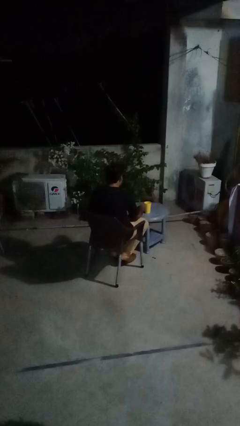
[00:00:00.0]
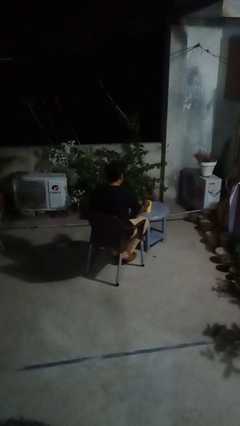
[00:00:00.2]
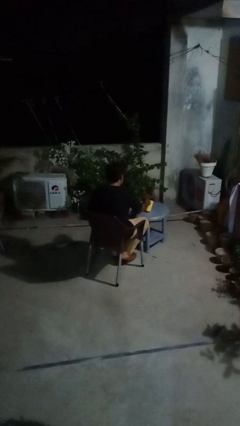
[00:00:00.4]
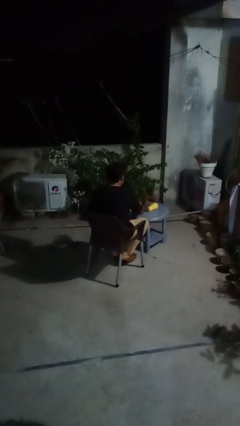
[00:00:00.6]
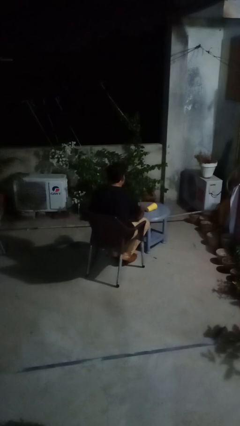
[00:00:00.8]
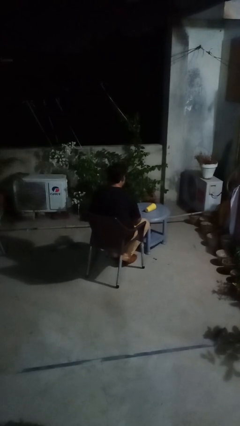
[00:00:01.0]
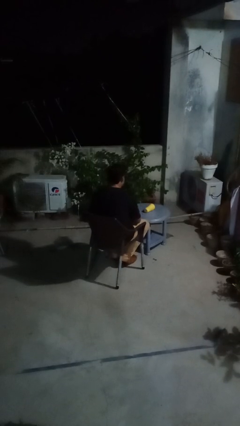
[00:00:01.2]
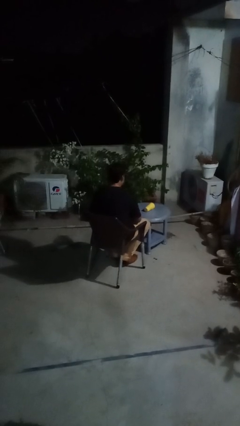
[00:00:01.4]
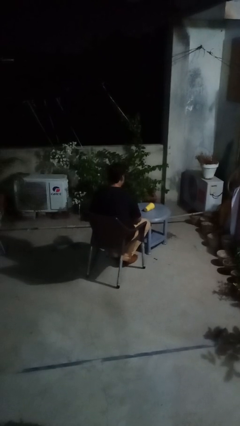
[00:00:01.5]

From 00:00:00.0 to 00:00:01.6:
person spills on table

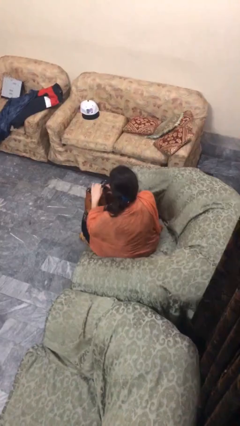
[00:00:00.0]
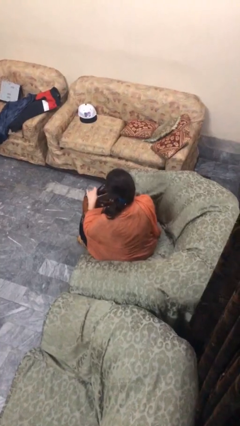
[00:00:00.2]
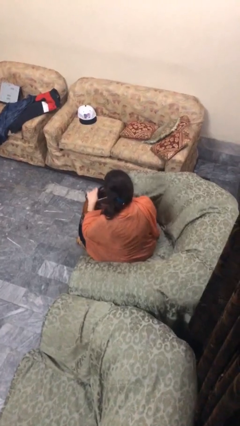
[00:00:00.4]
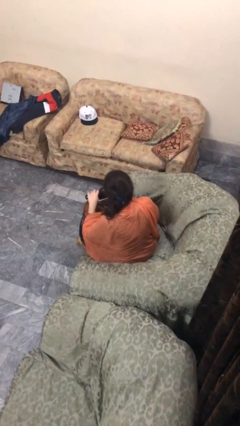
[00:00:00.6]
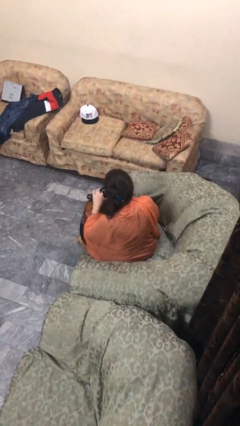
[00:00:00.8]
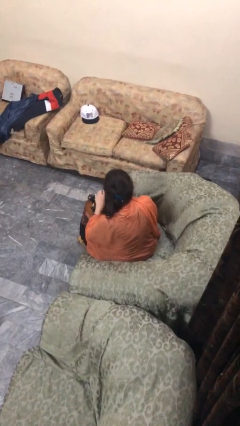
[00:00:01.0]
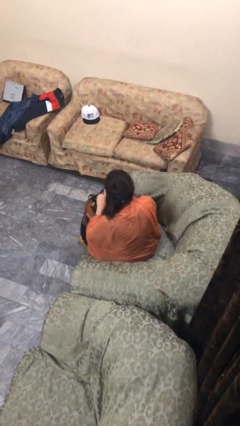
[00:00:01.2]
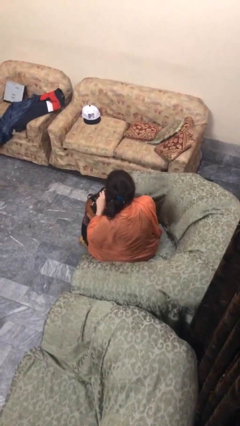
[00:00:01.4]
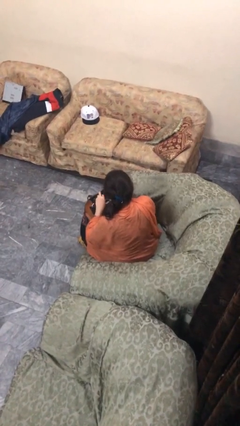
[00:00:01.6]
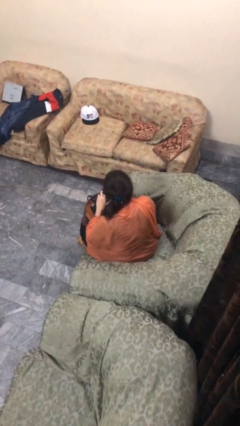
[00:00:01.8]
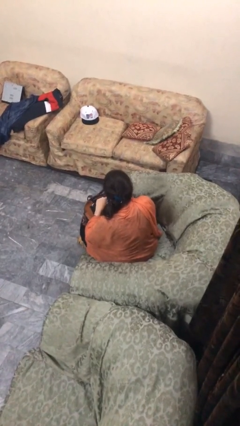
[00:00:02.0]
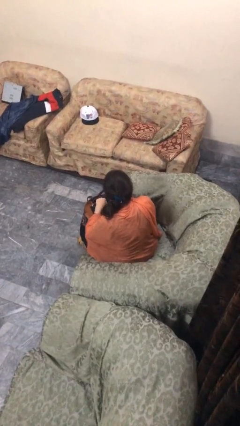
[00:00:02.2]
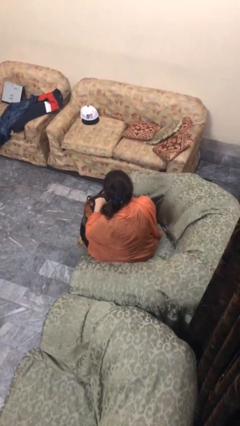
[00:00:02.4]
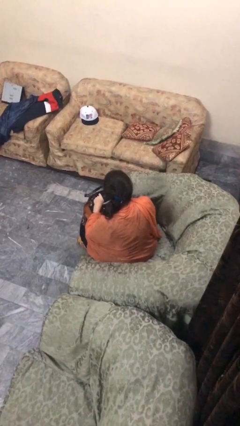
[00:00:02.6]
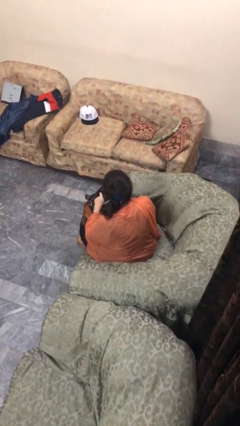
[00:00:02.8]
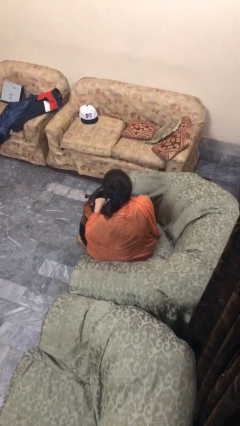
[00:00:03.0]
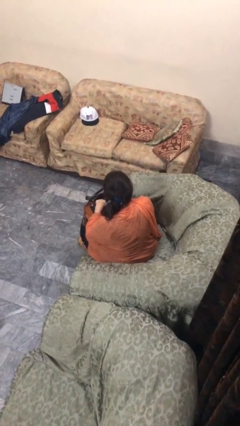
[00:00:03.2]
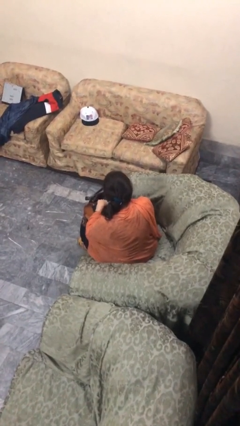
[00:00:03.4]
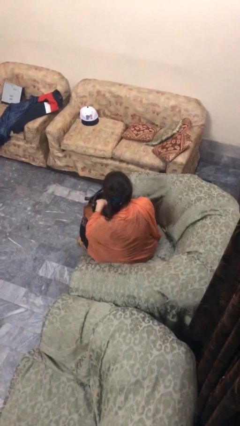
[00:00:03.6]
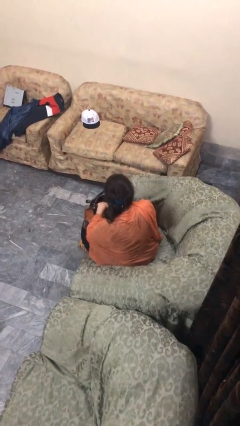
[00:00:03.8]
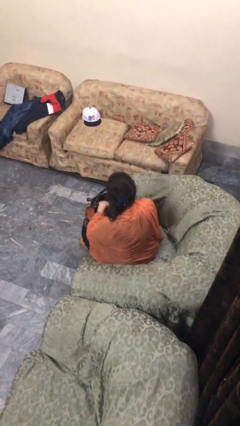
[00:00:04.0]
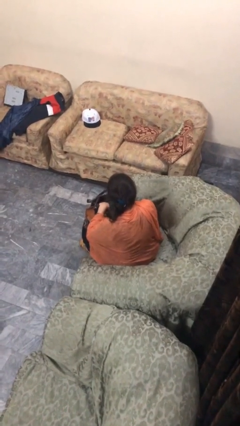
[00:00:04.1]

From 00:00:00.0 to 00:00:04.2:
person searches in purse

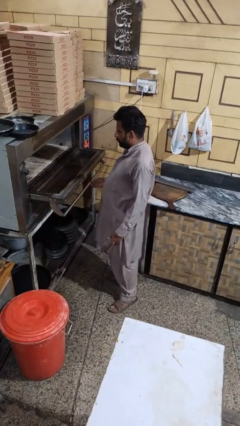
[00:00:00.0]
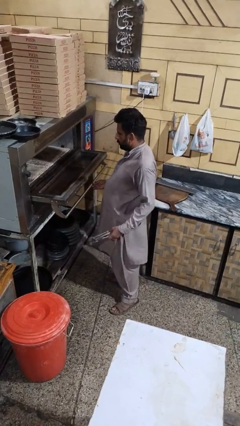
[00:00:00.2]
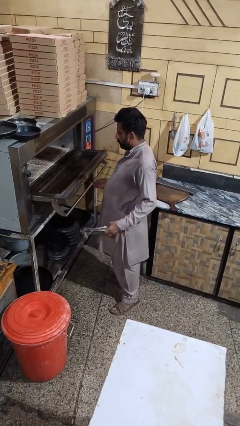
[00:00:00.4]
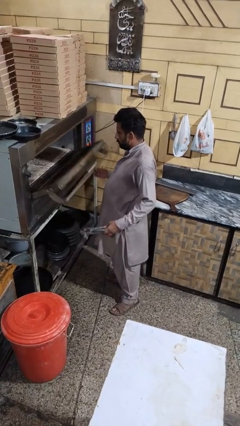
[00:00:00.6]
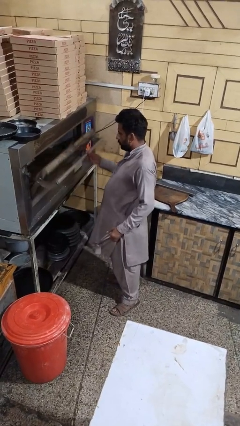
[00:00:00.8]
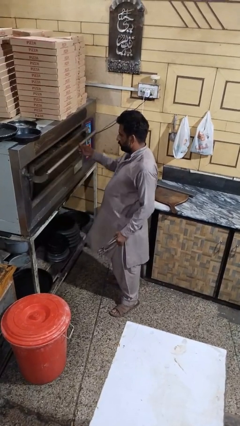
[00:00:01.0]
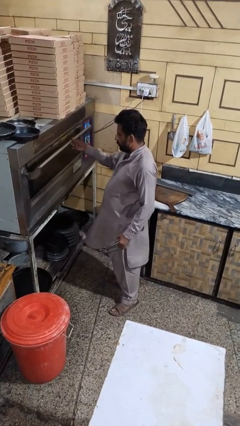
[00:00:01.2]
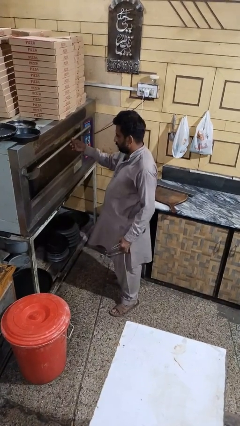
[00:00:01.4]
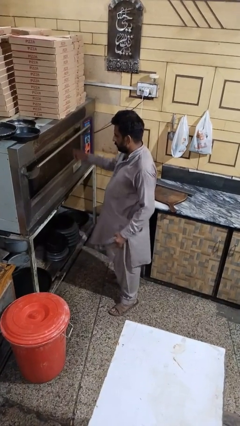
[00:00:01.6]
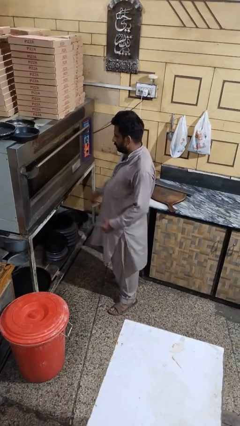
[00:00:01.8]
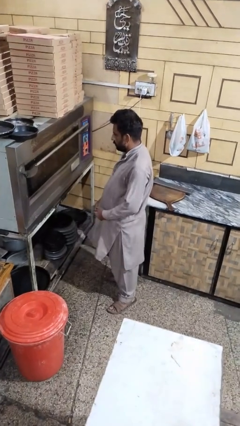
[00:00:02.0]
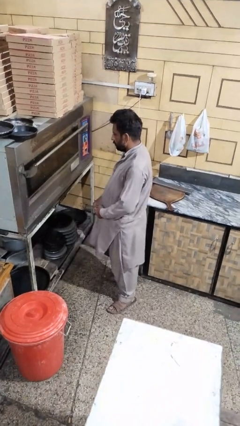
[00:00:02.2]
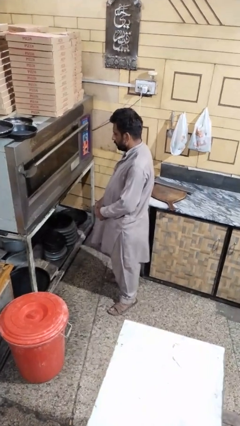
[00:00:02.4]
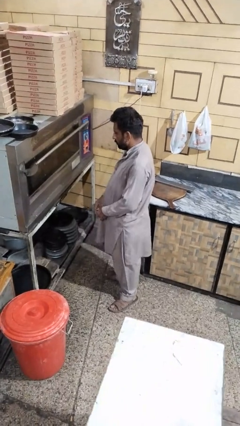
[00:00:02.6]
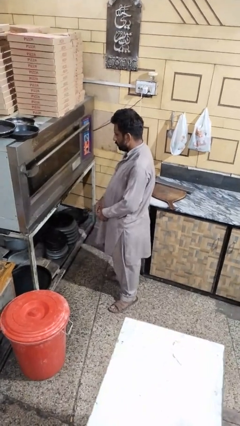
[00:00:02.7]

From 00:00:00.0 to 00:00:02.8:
person closes microwave

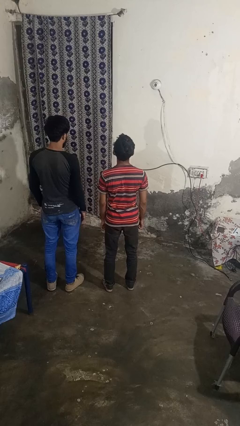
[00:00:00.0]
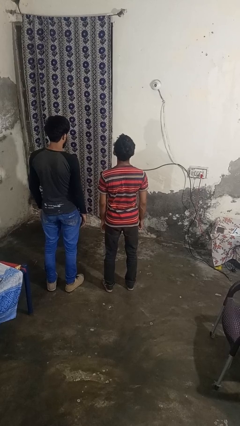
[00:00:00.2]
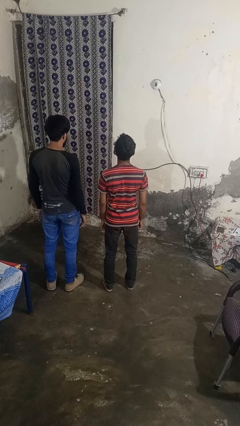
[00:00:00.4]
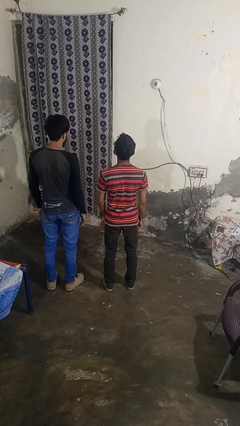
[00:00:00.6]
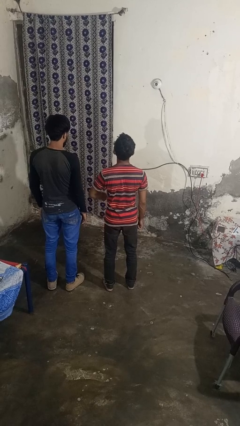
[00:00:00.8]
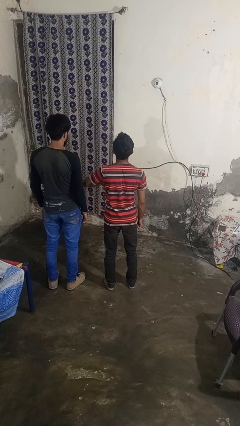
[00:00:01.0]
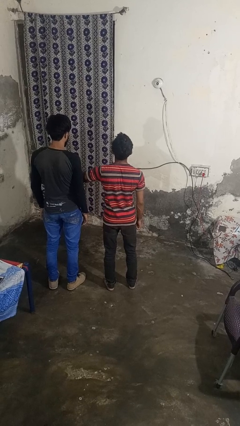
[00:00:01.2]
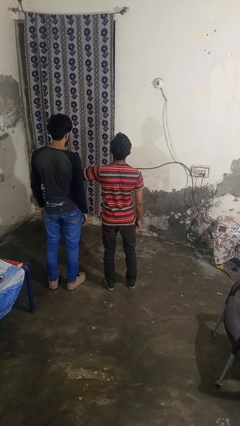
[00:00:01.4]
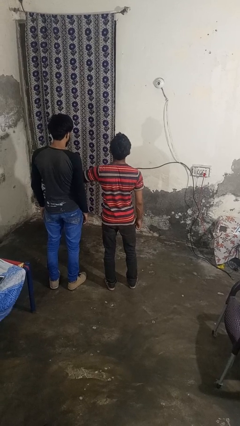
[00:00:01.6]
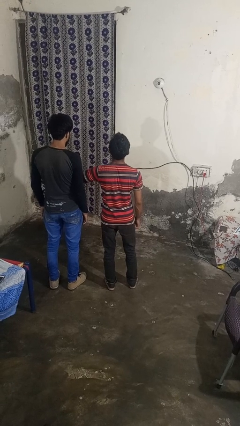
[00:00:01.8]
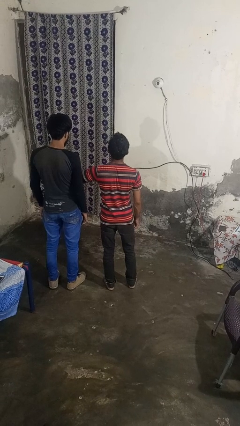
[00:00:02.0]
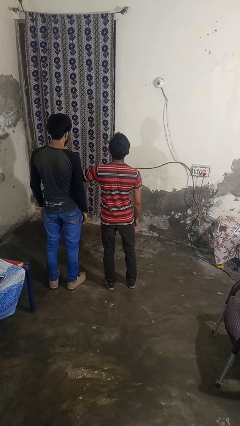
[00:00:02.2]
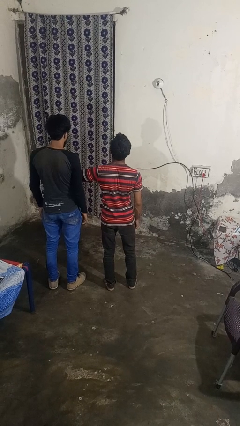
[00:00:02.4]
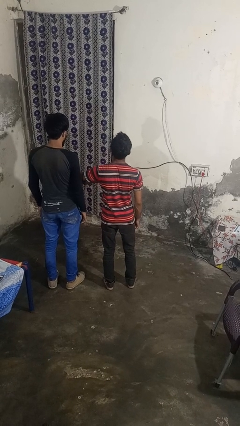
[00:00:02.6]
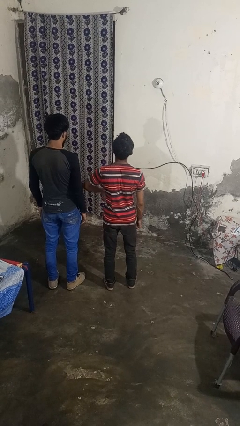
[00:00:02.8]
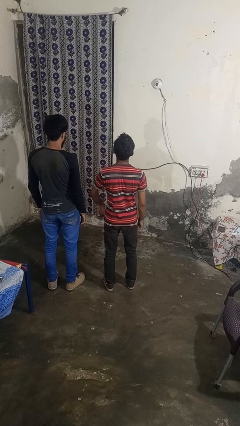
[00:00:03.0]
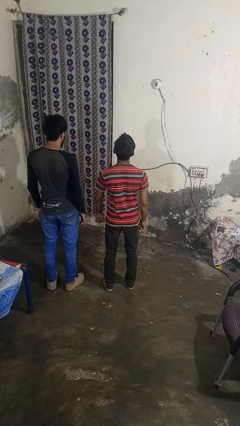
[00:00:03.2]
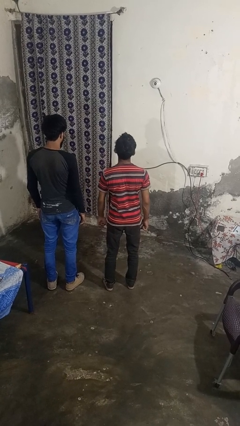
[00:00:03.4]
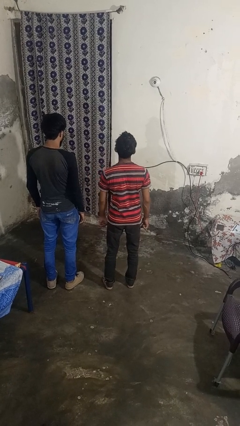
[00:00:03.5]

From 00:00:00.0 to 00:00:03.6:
person nudges person with elbow

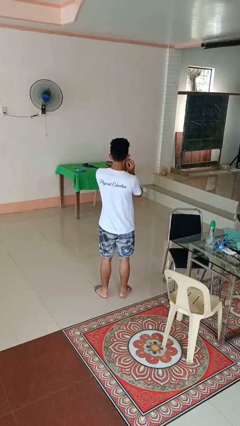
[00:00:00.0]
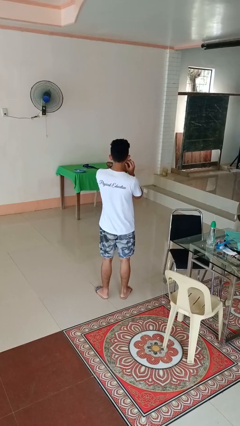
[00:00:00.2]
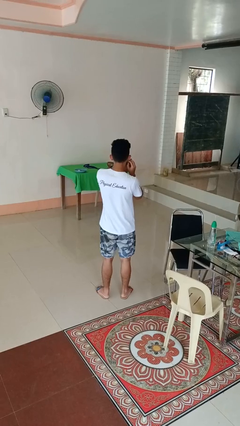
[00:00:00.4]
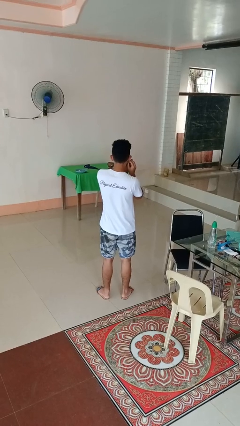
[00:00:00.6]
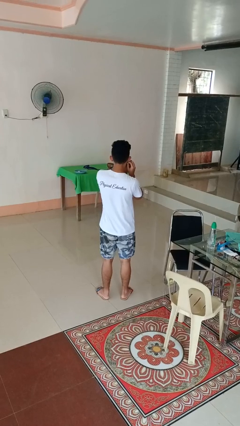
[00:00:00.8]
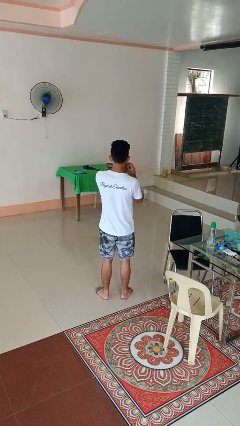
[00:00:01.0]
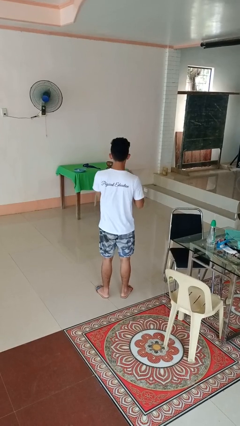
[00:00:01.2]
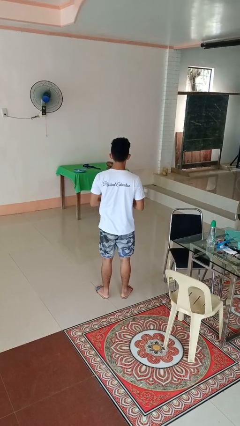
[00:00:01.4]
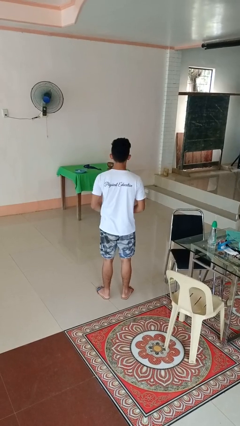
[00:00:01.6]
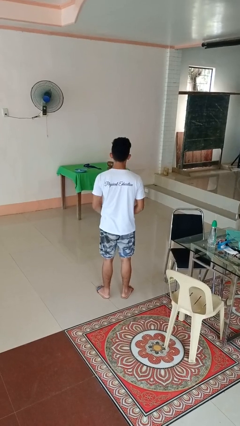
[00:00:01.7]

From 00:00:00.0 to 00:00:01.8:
person takes off earrings

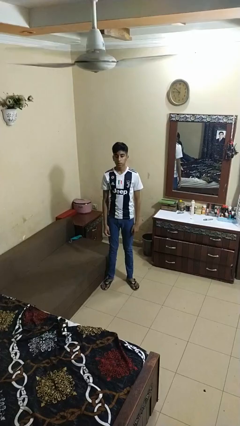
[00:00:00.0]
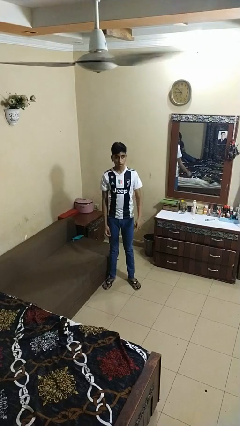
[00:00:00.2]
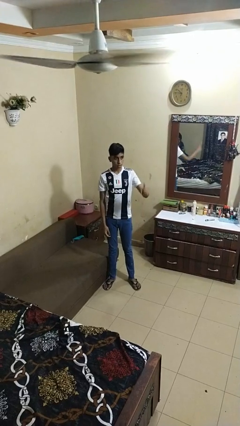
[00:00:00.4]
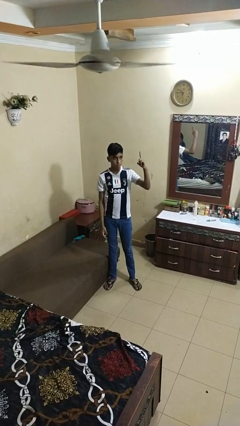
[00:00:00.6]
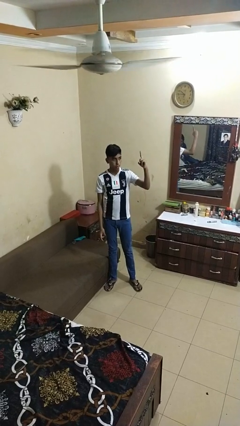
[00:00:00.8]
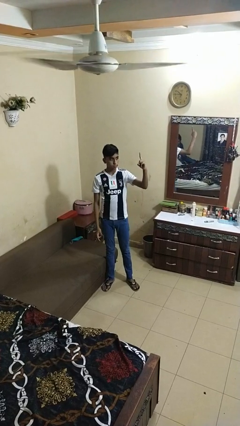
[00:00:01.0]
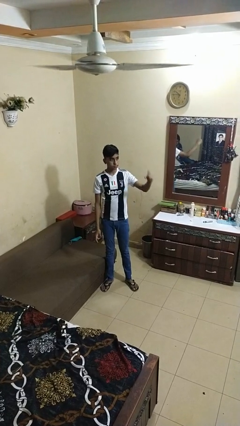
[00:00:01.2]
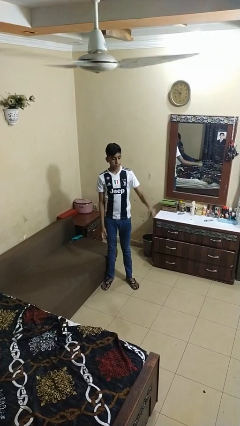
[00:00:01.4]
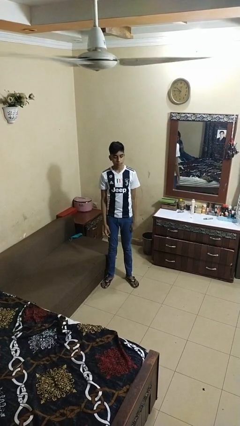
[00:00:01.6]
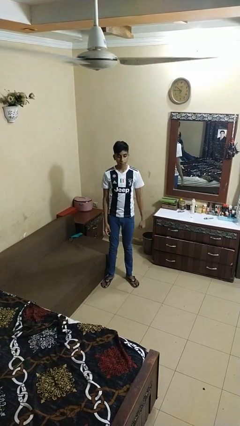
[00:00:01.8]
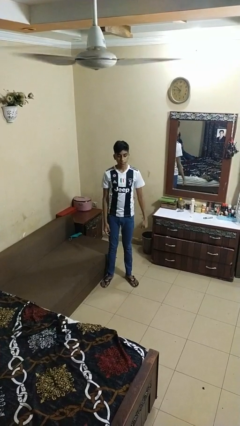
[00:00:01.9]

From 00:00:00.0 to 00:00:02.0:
person gestures number one

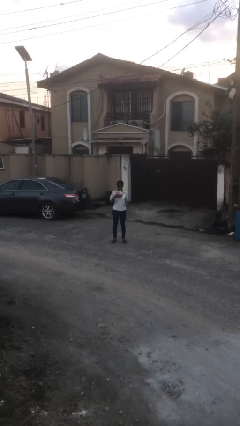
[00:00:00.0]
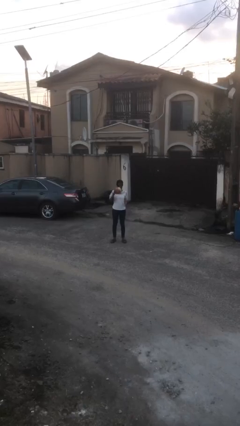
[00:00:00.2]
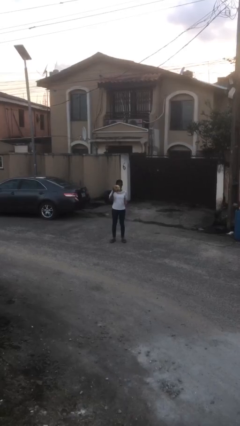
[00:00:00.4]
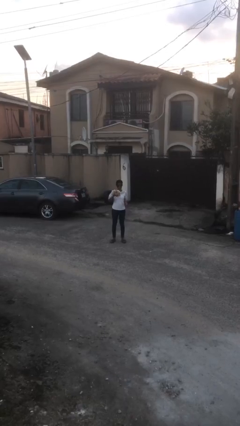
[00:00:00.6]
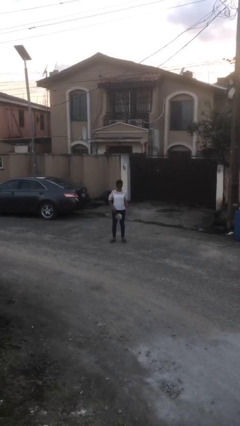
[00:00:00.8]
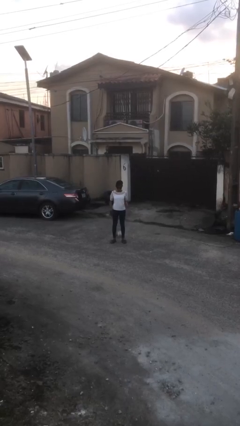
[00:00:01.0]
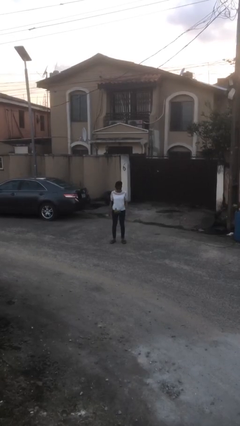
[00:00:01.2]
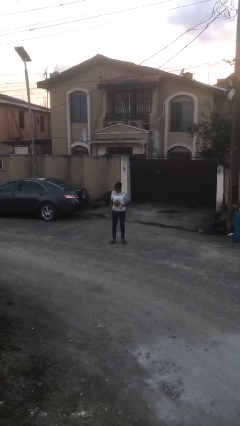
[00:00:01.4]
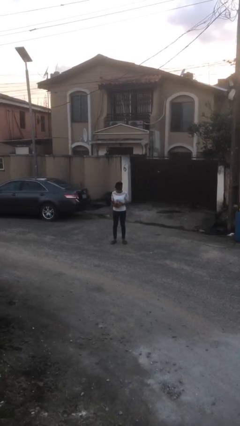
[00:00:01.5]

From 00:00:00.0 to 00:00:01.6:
person bounces ball on floor
